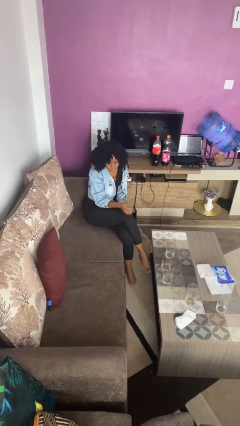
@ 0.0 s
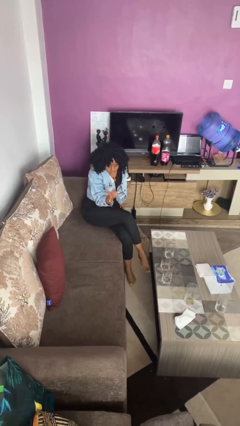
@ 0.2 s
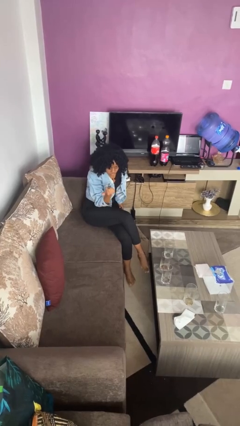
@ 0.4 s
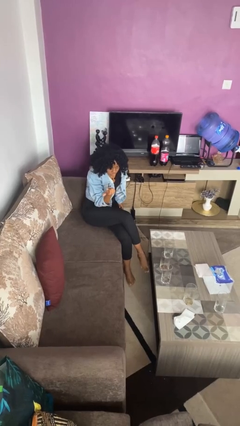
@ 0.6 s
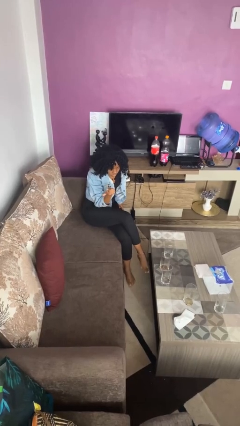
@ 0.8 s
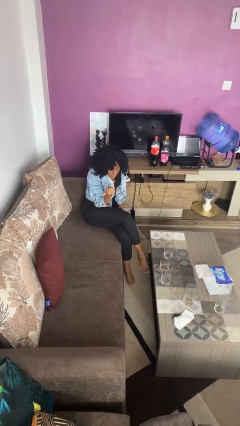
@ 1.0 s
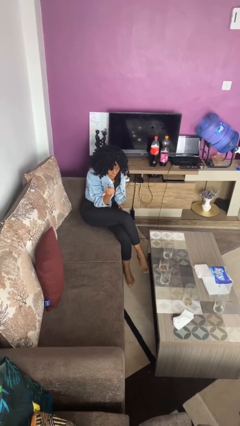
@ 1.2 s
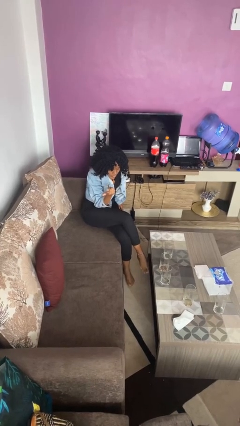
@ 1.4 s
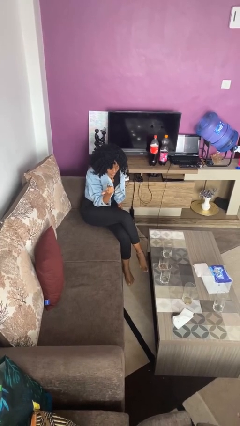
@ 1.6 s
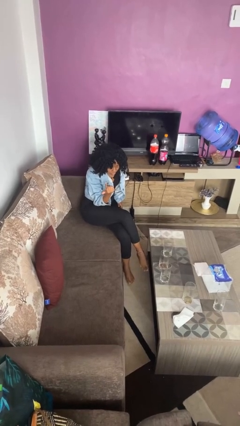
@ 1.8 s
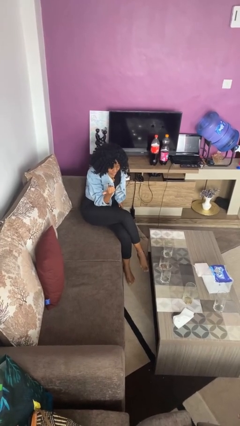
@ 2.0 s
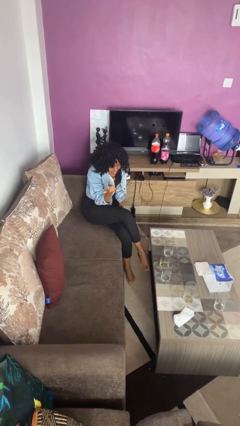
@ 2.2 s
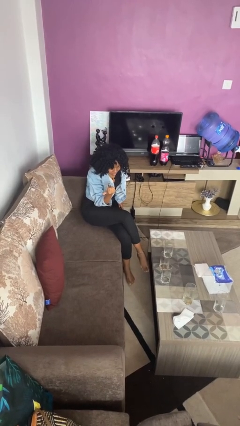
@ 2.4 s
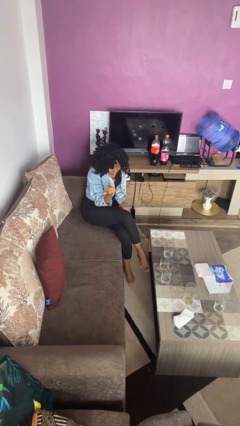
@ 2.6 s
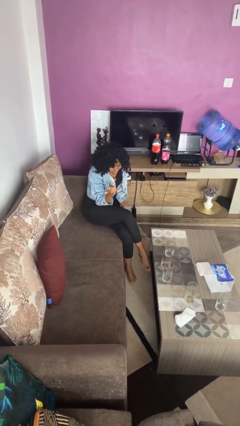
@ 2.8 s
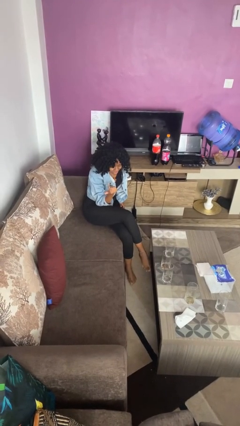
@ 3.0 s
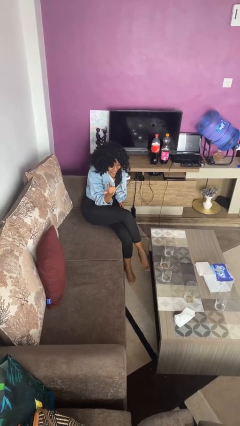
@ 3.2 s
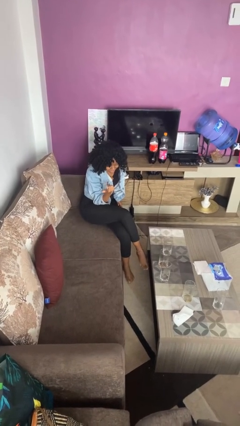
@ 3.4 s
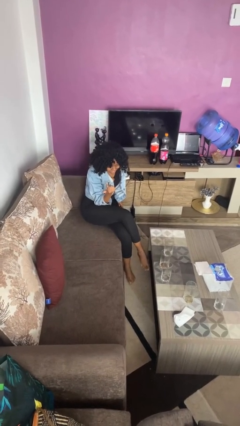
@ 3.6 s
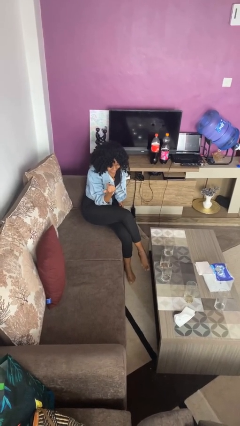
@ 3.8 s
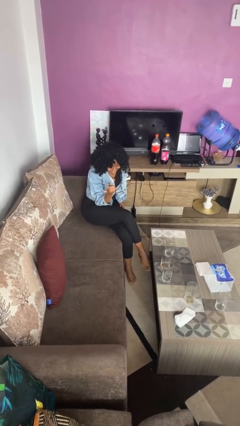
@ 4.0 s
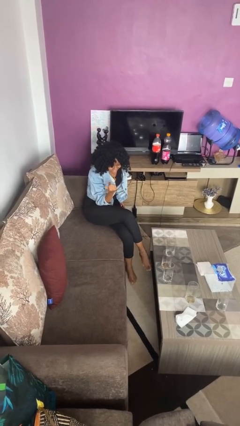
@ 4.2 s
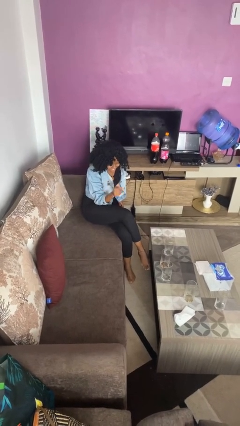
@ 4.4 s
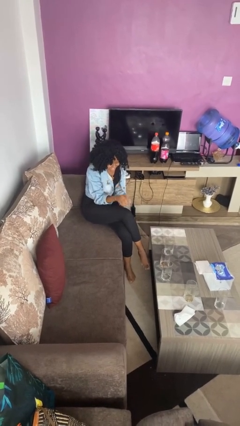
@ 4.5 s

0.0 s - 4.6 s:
person gestures come here

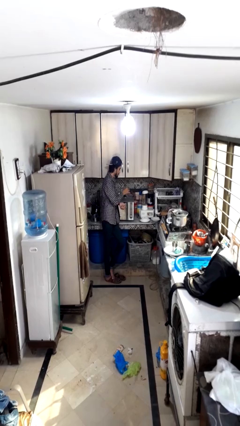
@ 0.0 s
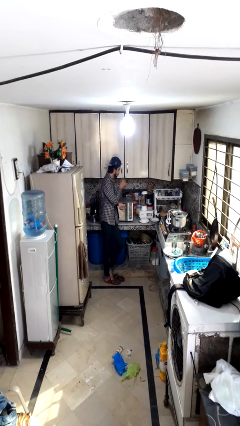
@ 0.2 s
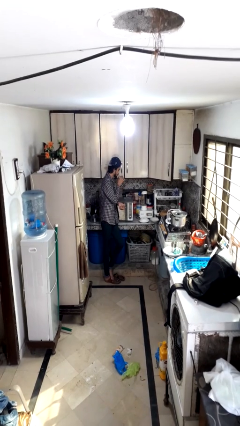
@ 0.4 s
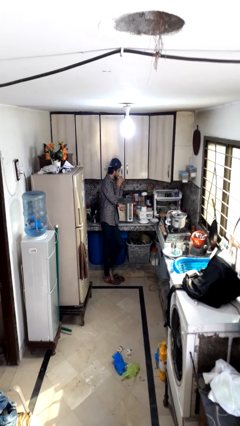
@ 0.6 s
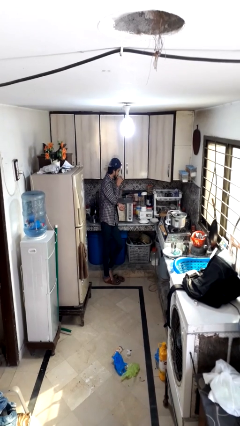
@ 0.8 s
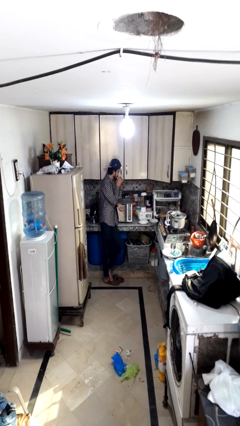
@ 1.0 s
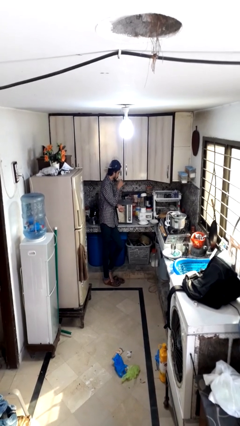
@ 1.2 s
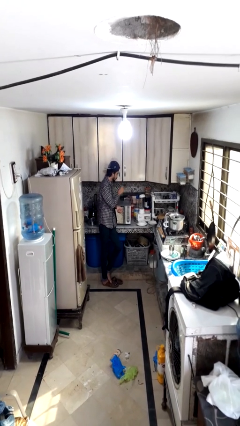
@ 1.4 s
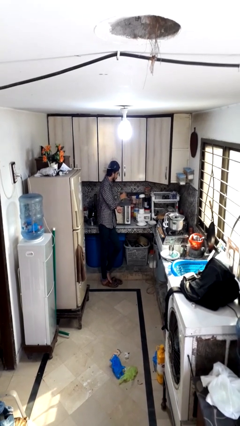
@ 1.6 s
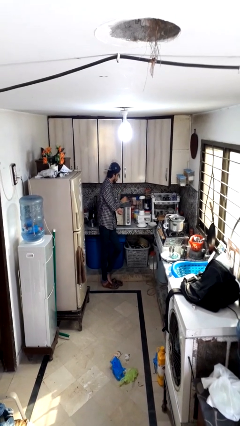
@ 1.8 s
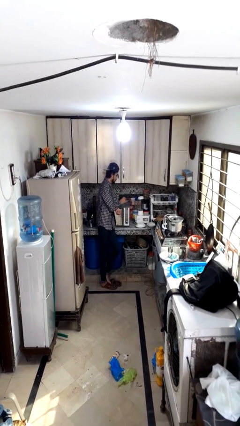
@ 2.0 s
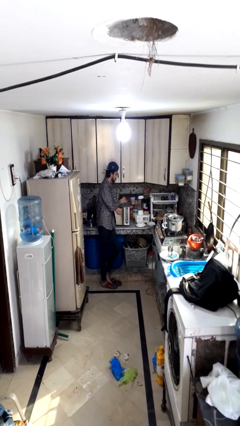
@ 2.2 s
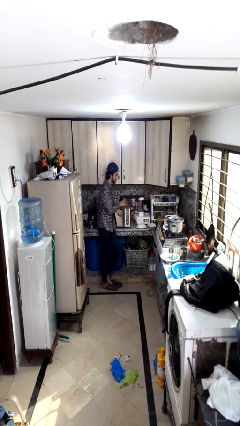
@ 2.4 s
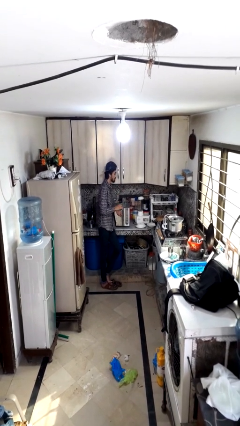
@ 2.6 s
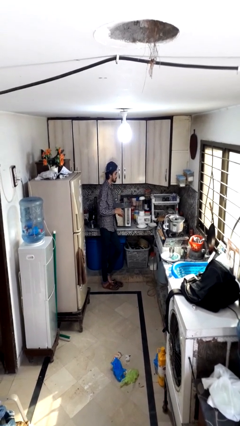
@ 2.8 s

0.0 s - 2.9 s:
person drinks from cup

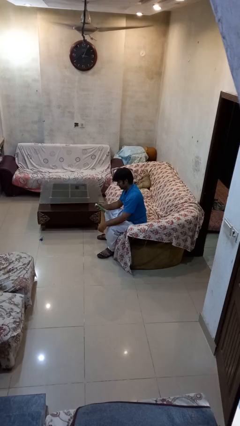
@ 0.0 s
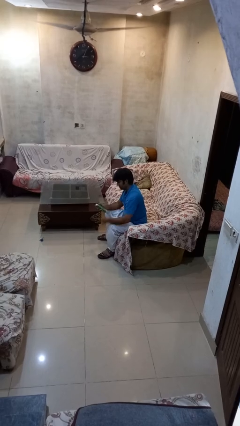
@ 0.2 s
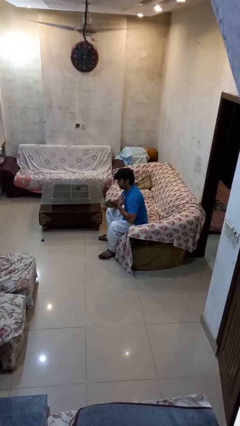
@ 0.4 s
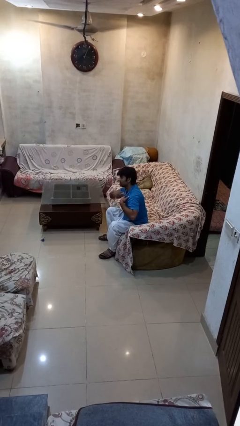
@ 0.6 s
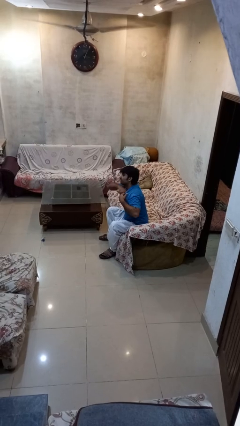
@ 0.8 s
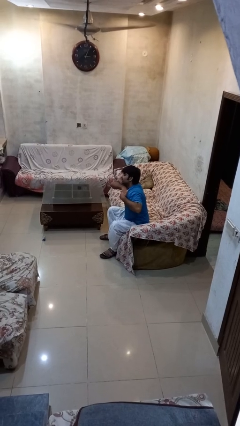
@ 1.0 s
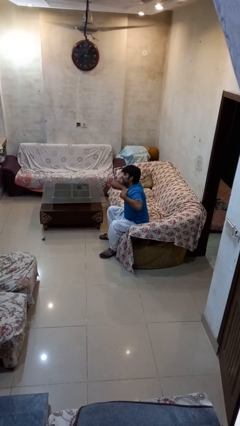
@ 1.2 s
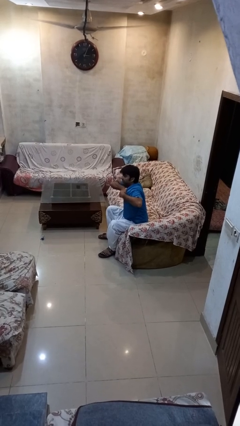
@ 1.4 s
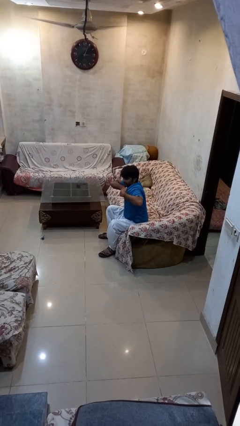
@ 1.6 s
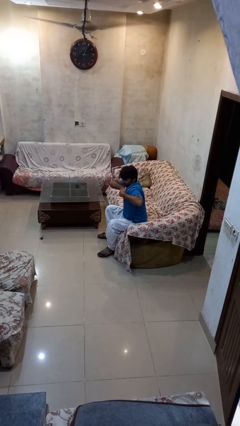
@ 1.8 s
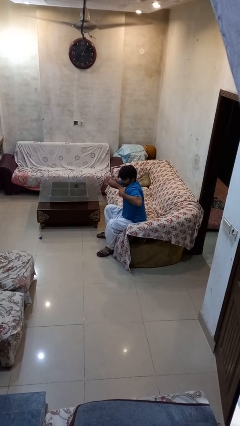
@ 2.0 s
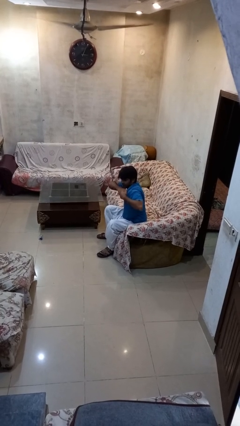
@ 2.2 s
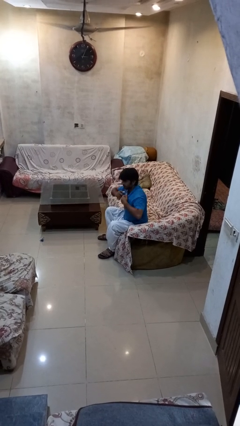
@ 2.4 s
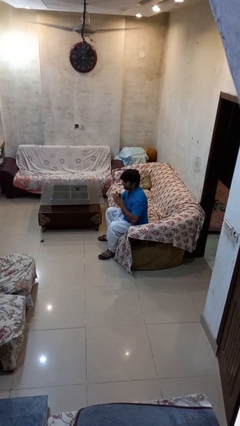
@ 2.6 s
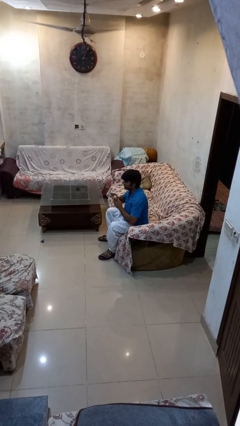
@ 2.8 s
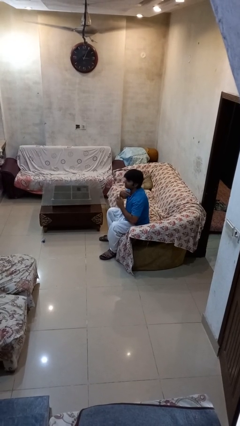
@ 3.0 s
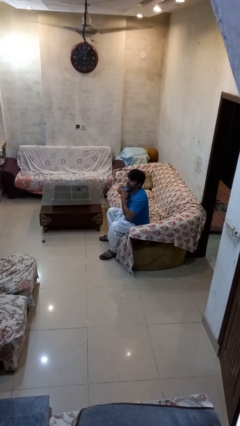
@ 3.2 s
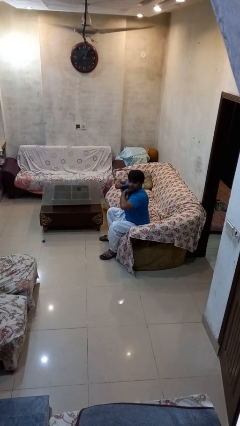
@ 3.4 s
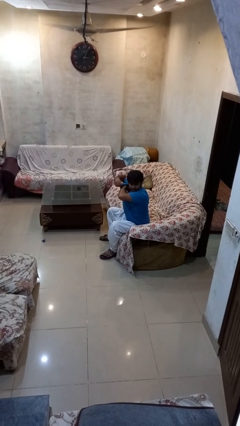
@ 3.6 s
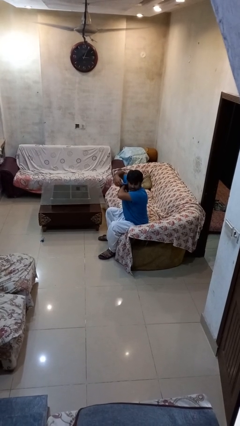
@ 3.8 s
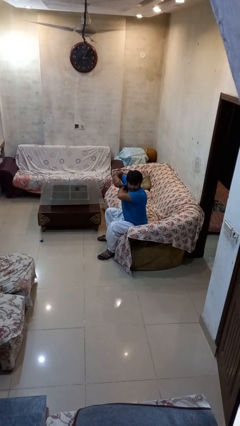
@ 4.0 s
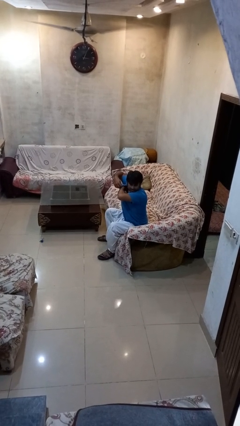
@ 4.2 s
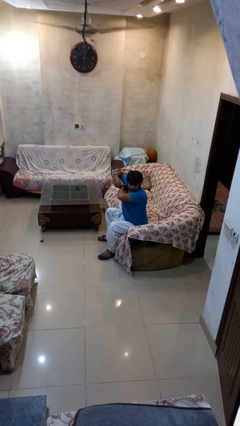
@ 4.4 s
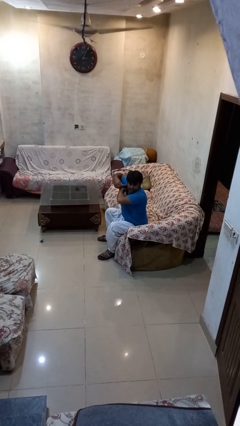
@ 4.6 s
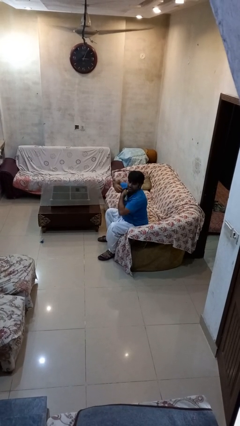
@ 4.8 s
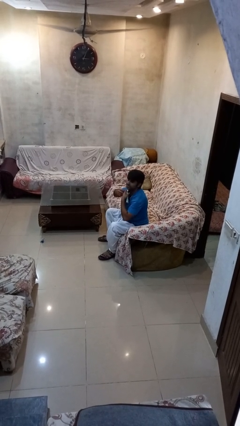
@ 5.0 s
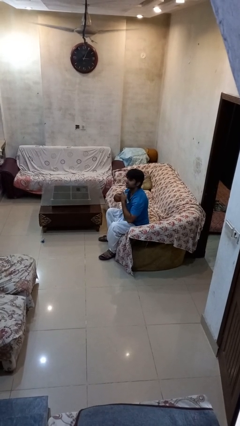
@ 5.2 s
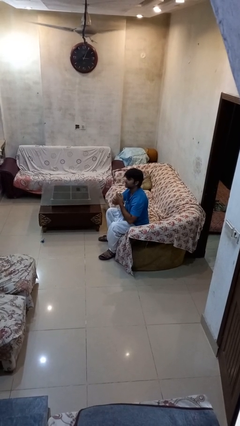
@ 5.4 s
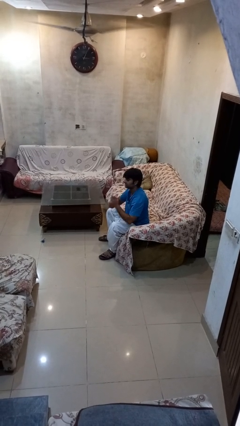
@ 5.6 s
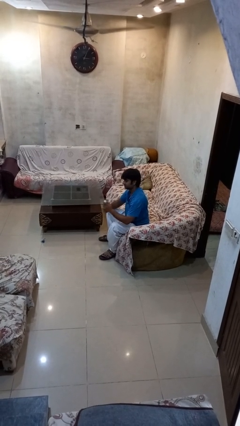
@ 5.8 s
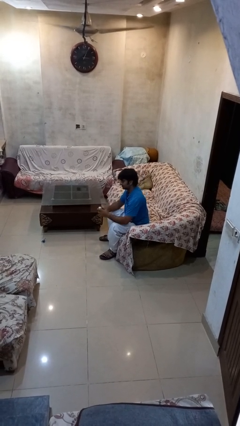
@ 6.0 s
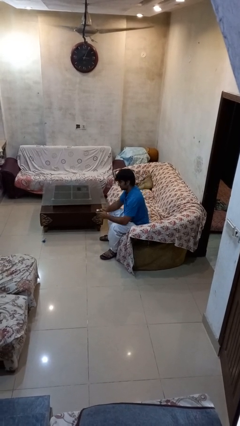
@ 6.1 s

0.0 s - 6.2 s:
person applies deodorant

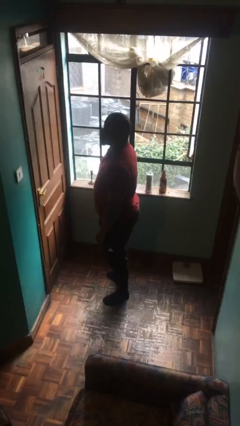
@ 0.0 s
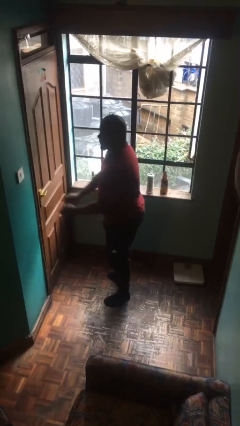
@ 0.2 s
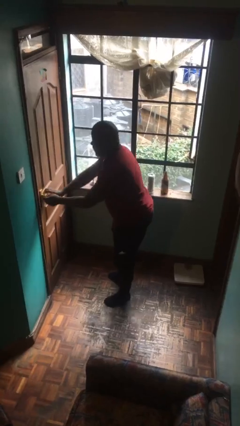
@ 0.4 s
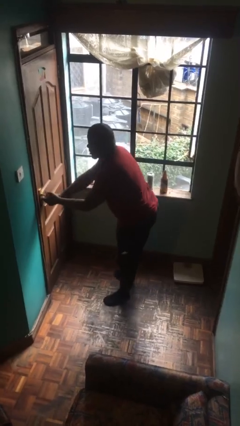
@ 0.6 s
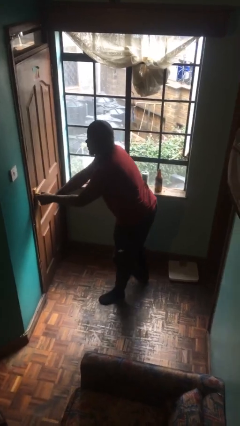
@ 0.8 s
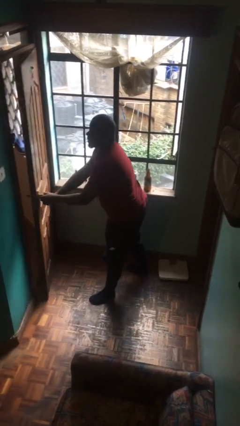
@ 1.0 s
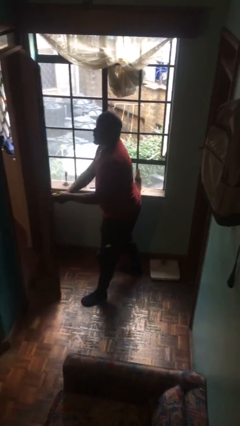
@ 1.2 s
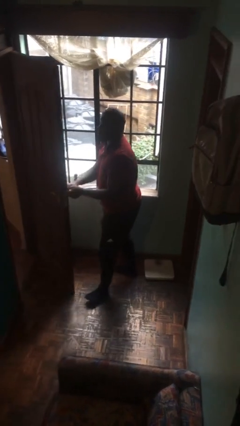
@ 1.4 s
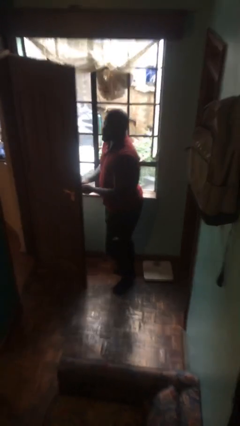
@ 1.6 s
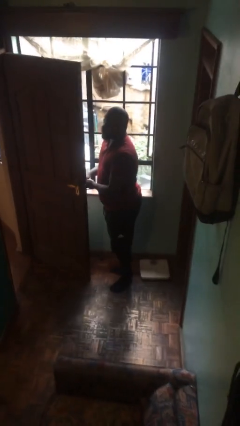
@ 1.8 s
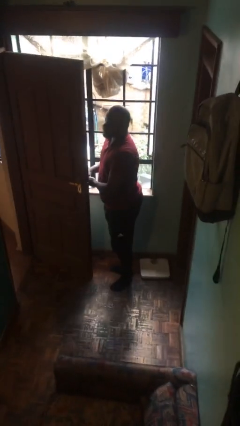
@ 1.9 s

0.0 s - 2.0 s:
person opens facility door

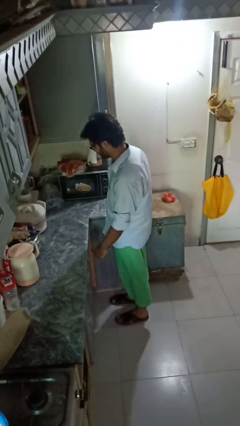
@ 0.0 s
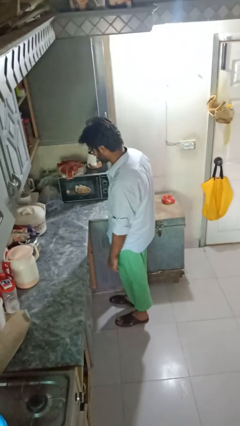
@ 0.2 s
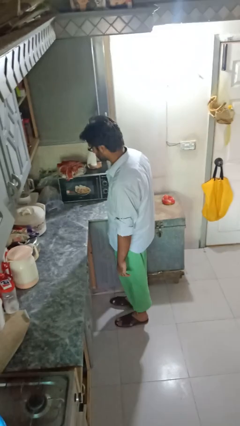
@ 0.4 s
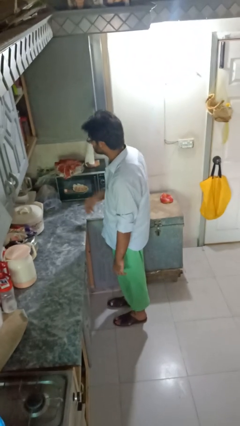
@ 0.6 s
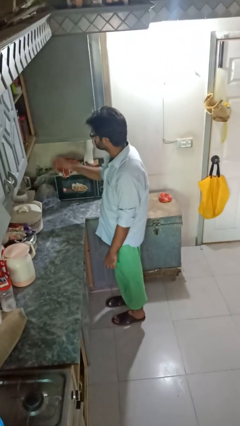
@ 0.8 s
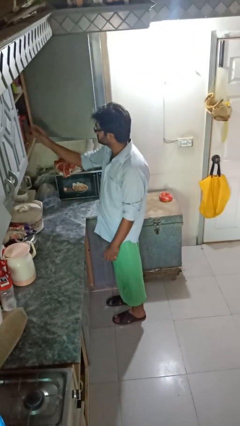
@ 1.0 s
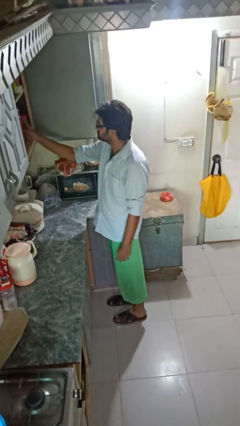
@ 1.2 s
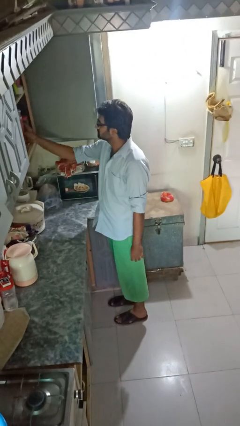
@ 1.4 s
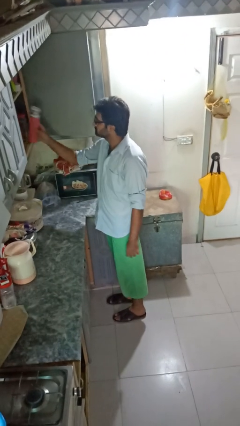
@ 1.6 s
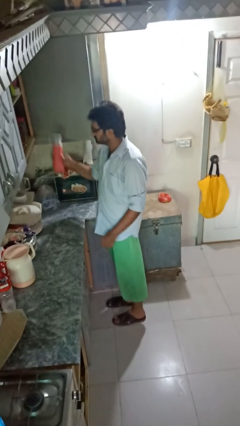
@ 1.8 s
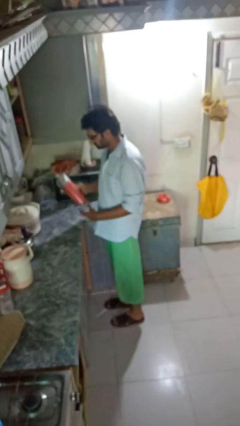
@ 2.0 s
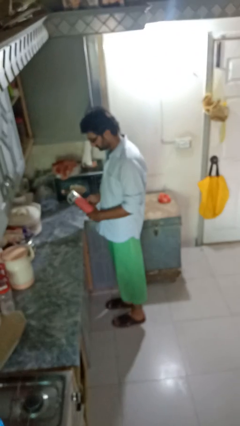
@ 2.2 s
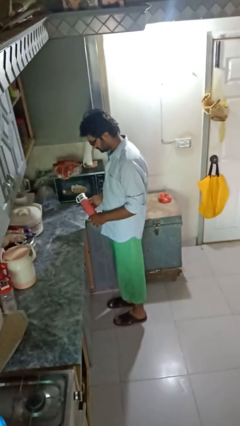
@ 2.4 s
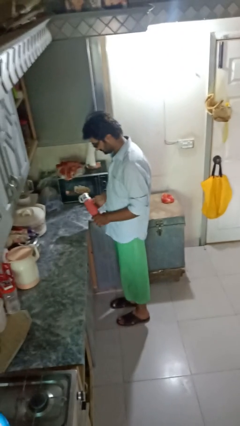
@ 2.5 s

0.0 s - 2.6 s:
person picks up object from cabinet
